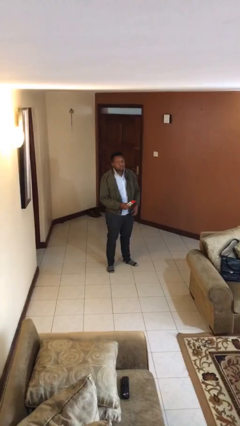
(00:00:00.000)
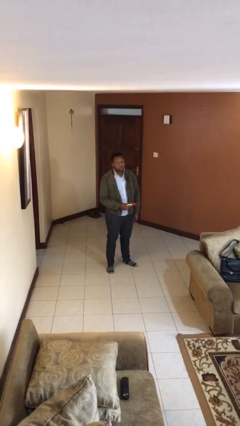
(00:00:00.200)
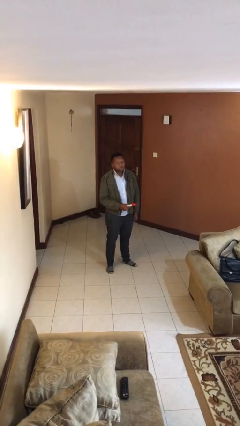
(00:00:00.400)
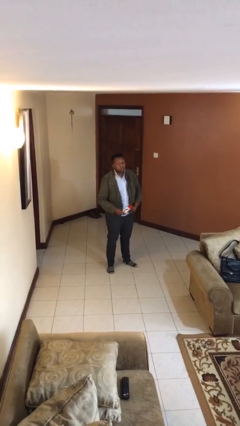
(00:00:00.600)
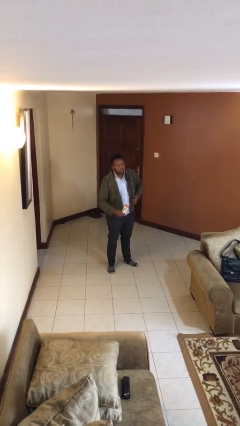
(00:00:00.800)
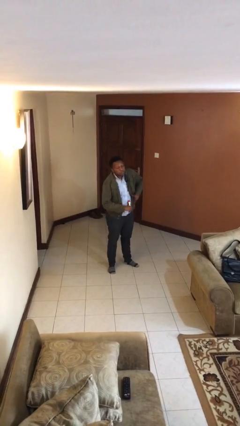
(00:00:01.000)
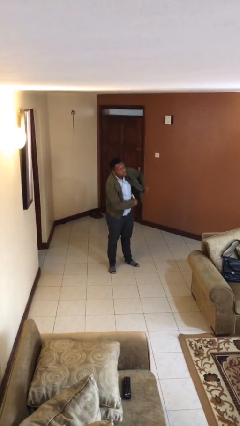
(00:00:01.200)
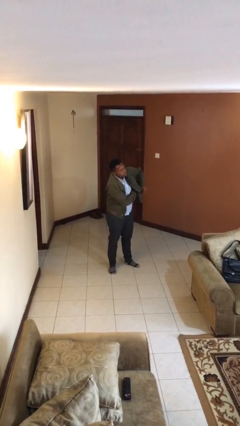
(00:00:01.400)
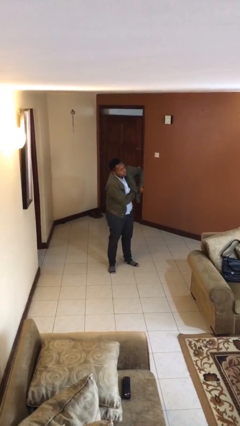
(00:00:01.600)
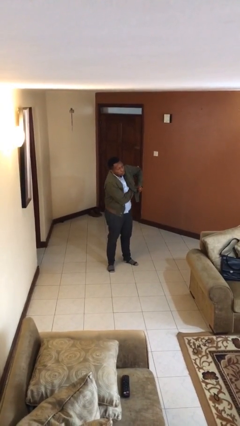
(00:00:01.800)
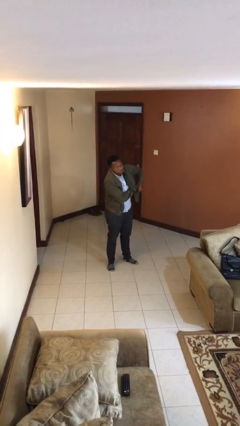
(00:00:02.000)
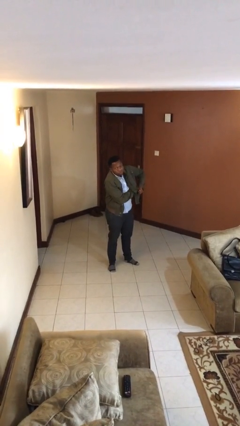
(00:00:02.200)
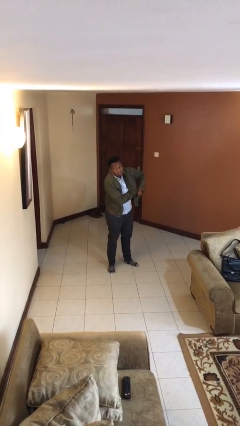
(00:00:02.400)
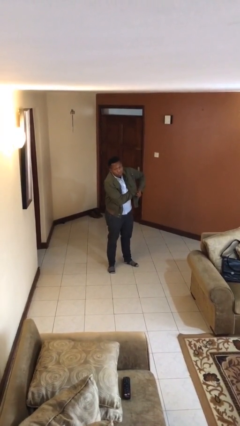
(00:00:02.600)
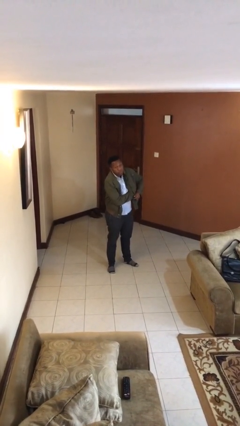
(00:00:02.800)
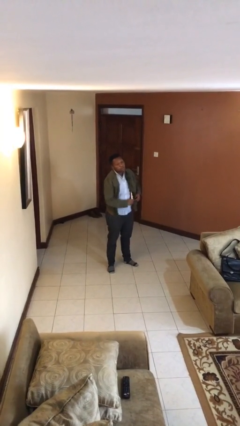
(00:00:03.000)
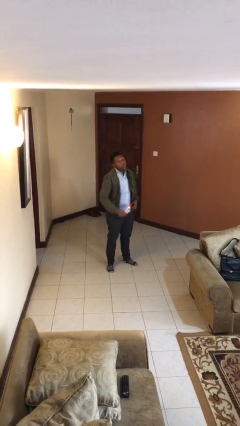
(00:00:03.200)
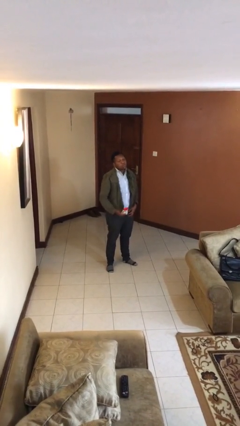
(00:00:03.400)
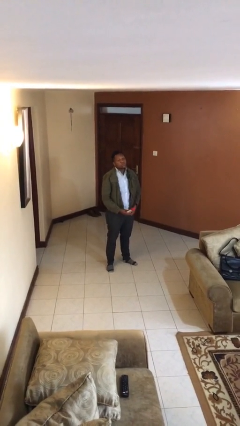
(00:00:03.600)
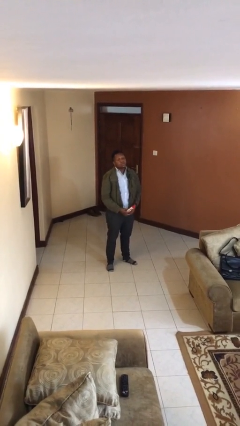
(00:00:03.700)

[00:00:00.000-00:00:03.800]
person applies deodorant

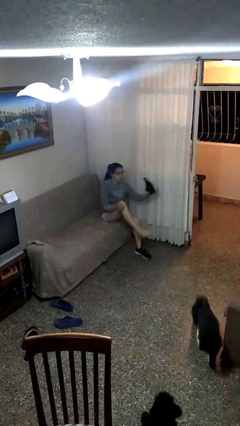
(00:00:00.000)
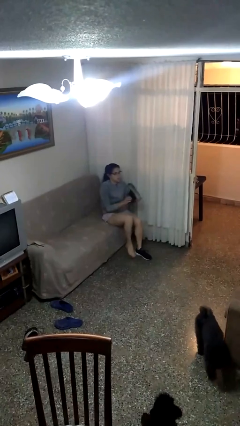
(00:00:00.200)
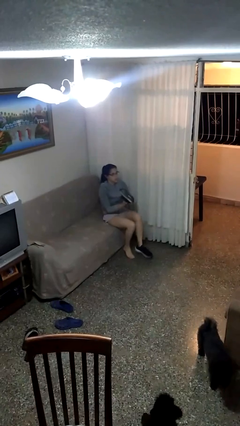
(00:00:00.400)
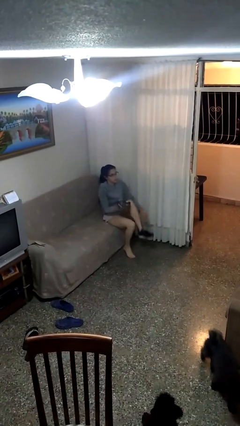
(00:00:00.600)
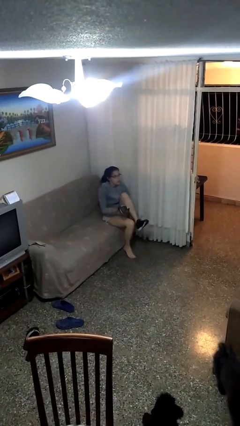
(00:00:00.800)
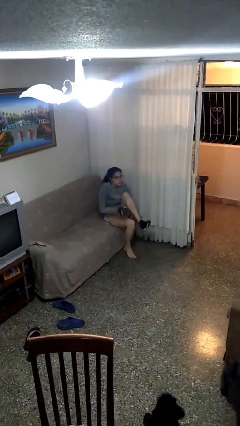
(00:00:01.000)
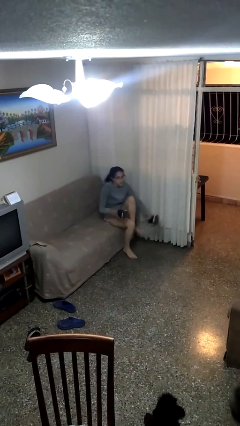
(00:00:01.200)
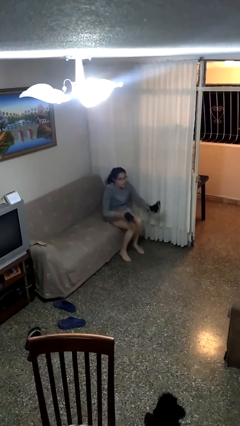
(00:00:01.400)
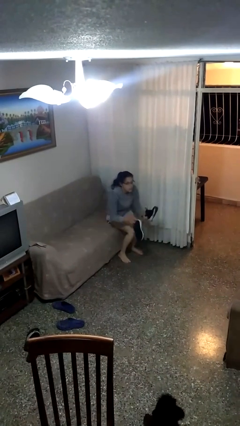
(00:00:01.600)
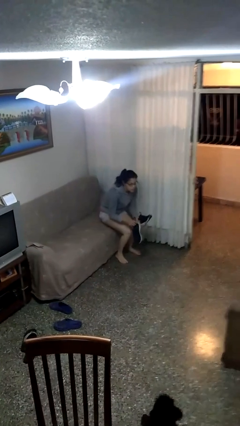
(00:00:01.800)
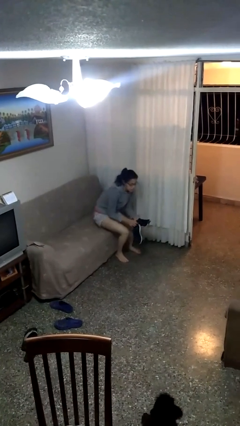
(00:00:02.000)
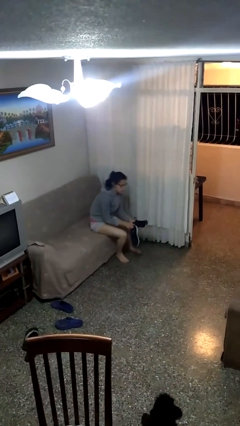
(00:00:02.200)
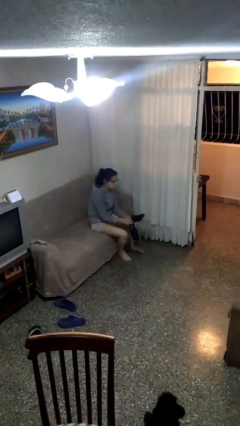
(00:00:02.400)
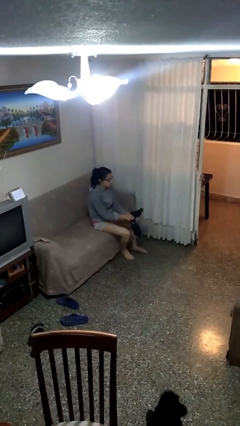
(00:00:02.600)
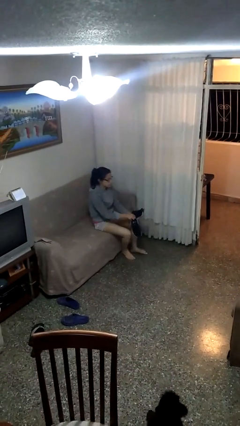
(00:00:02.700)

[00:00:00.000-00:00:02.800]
person takes off shoes

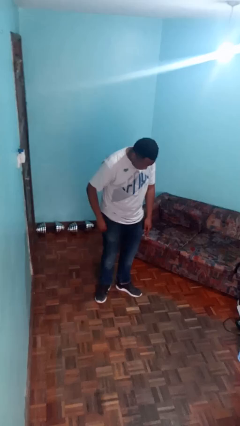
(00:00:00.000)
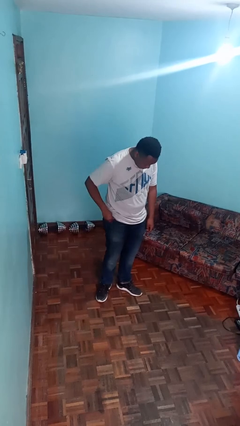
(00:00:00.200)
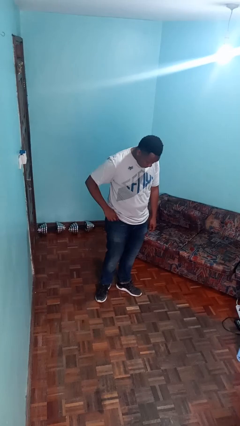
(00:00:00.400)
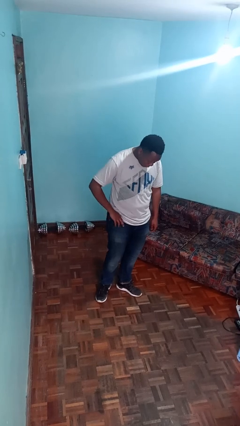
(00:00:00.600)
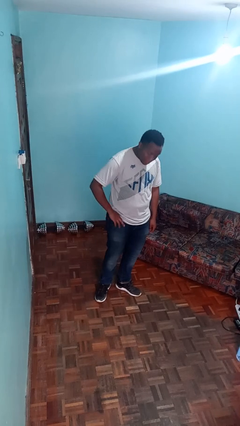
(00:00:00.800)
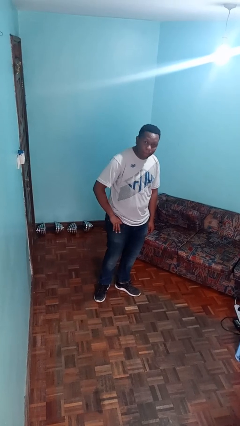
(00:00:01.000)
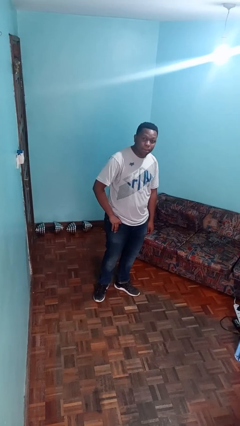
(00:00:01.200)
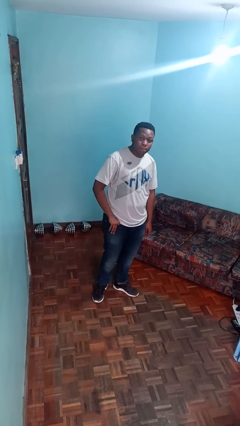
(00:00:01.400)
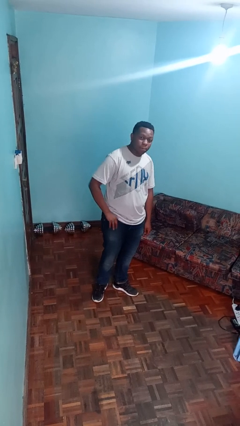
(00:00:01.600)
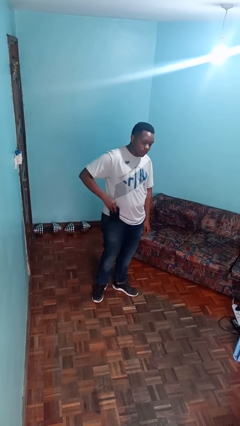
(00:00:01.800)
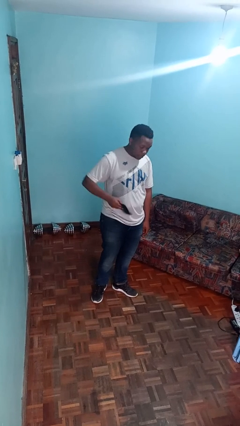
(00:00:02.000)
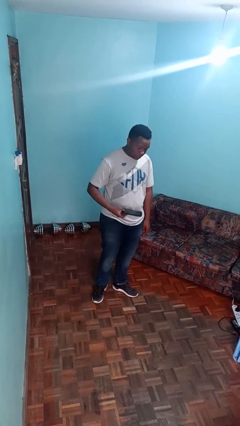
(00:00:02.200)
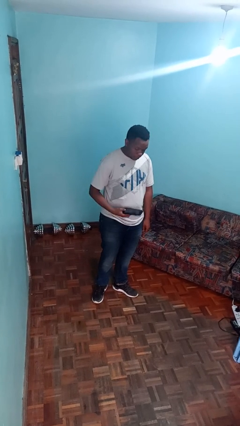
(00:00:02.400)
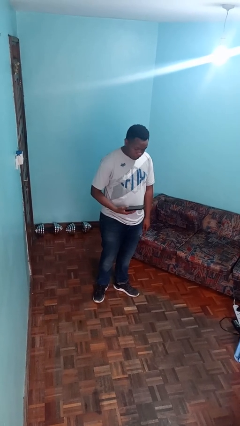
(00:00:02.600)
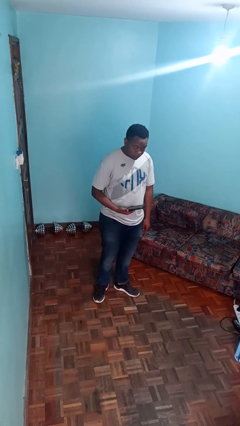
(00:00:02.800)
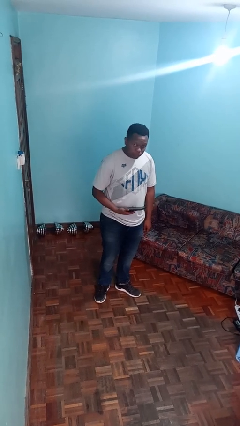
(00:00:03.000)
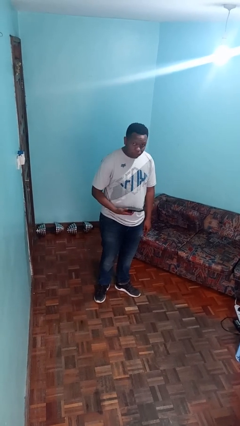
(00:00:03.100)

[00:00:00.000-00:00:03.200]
person takes phone from pocket

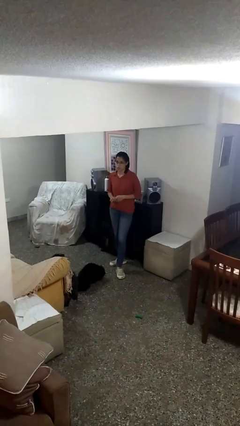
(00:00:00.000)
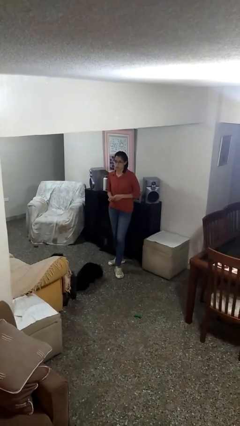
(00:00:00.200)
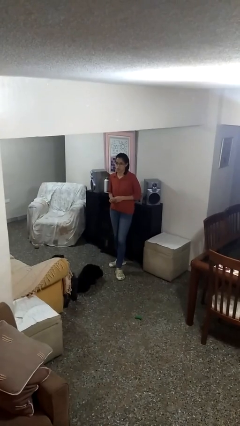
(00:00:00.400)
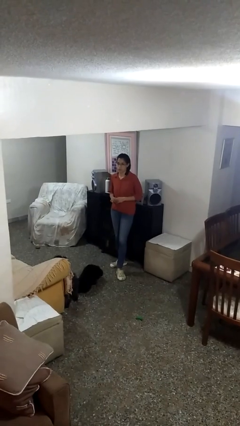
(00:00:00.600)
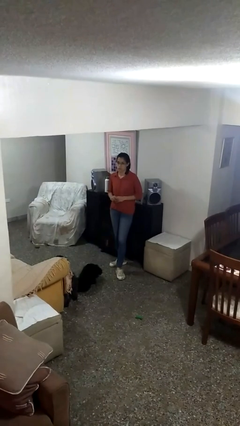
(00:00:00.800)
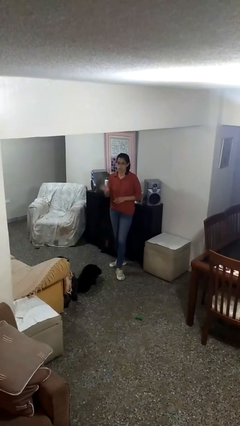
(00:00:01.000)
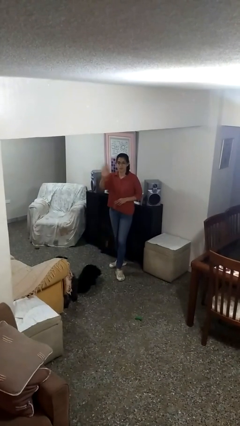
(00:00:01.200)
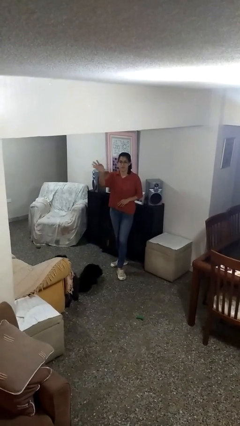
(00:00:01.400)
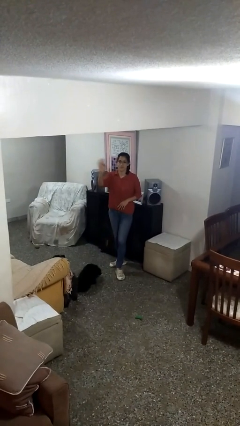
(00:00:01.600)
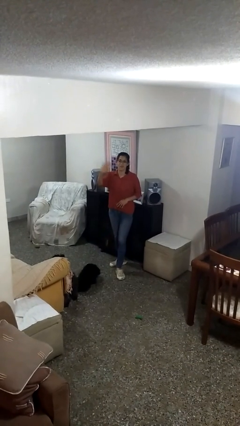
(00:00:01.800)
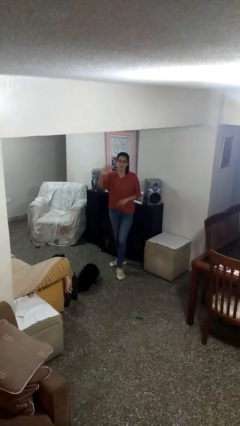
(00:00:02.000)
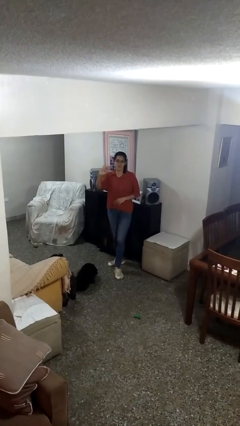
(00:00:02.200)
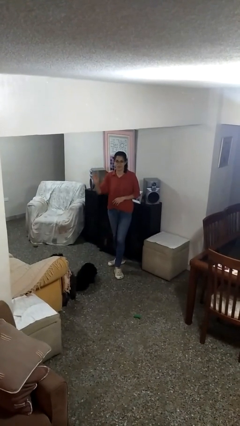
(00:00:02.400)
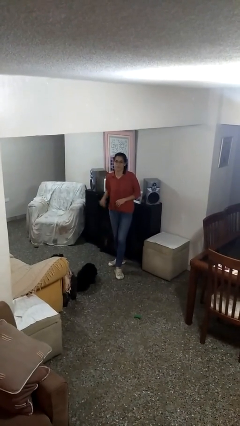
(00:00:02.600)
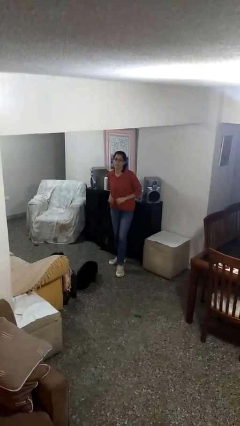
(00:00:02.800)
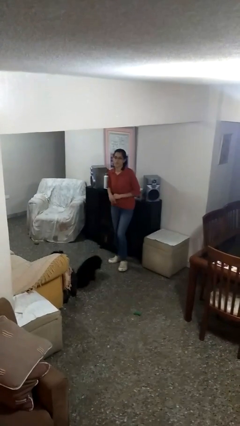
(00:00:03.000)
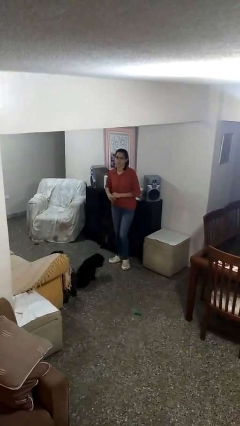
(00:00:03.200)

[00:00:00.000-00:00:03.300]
person waves at person

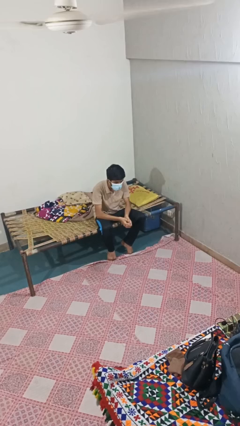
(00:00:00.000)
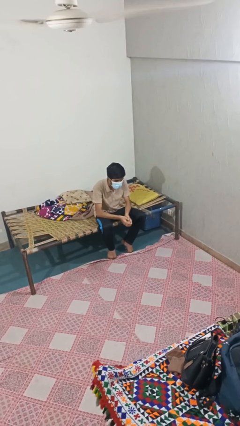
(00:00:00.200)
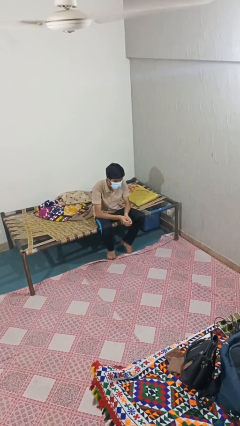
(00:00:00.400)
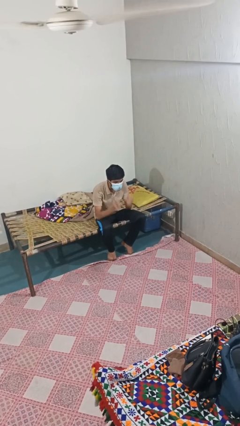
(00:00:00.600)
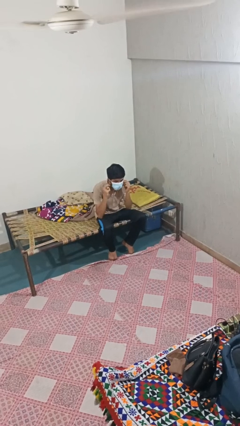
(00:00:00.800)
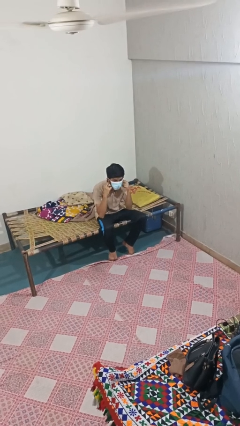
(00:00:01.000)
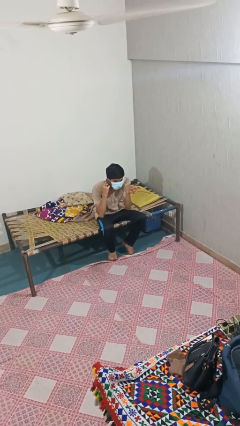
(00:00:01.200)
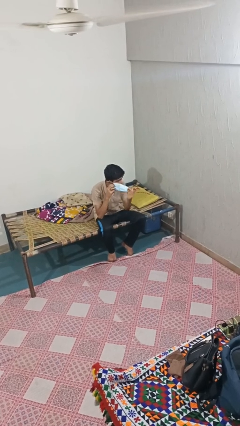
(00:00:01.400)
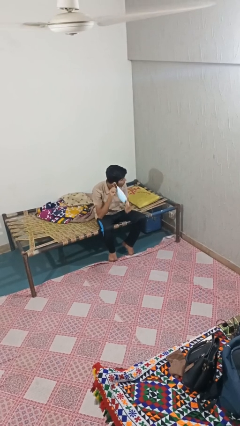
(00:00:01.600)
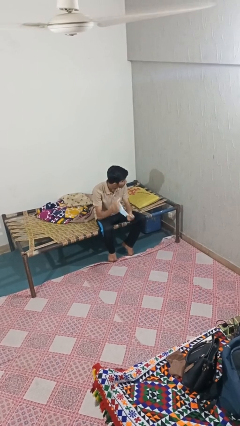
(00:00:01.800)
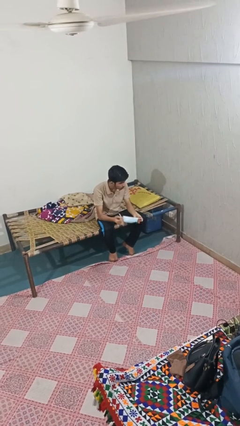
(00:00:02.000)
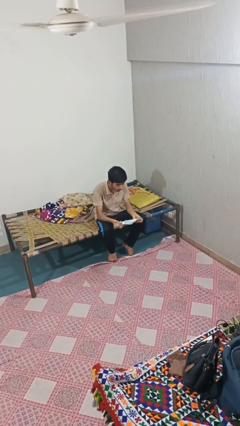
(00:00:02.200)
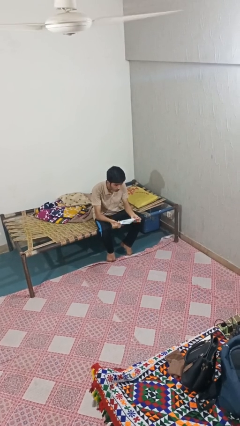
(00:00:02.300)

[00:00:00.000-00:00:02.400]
person takes off facemask

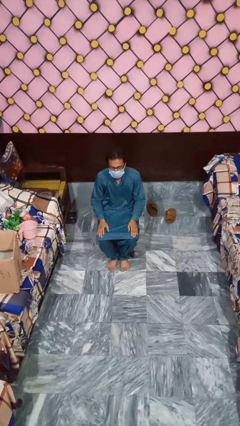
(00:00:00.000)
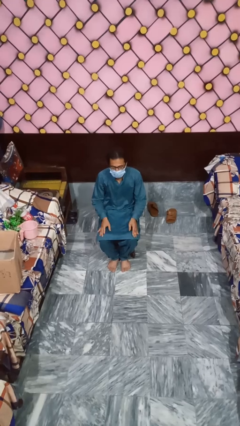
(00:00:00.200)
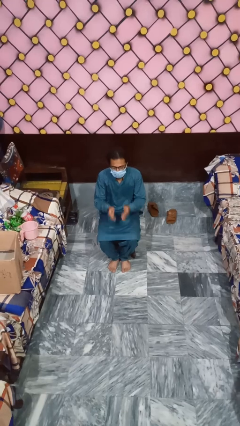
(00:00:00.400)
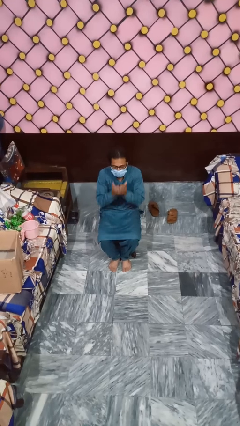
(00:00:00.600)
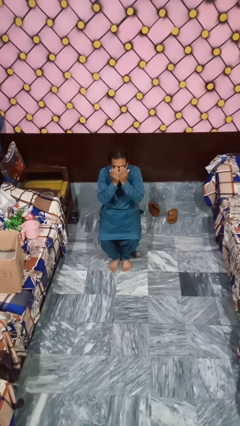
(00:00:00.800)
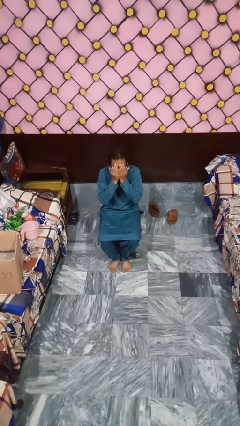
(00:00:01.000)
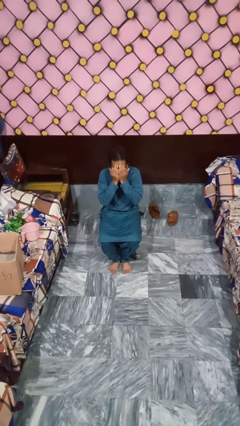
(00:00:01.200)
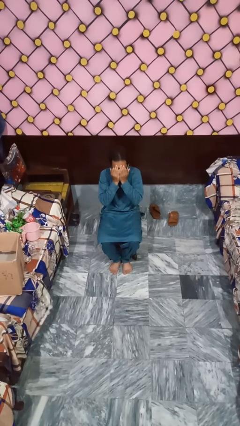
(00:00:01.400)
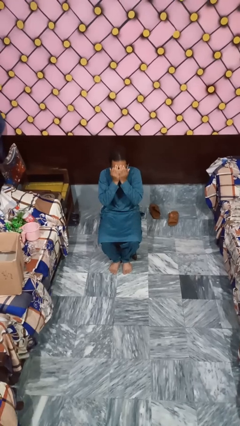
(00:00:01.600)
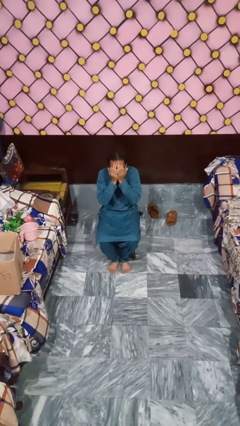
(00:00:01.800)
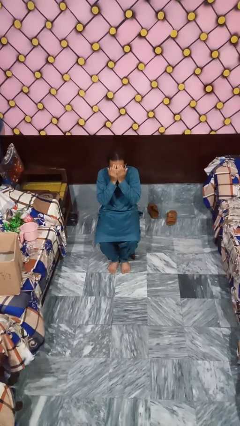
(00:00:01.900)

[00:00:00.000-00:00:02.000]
person covers face with hands
